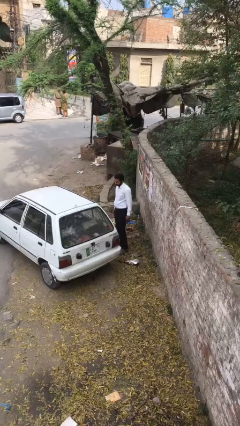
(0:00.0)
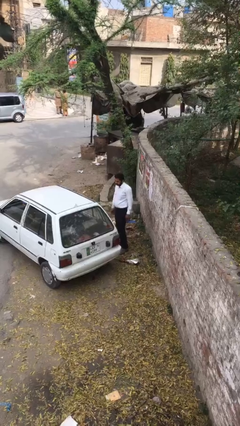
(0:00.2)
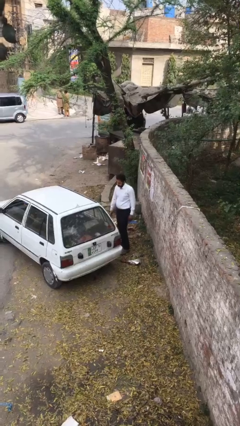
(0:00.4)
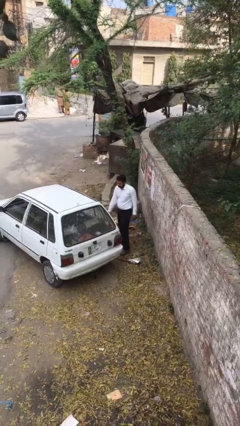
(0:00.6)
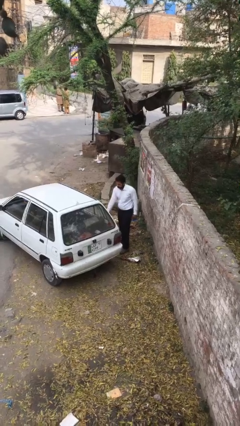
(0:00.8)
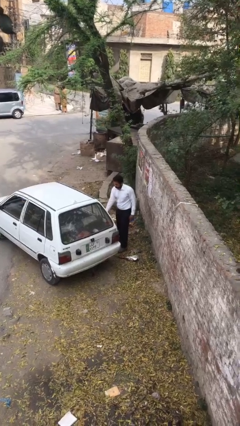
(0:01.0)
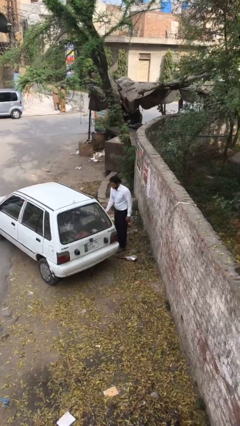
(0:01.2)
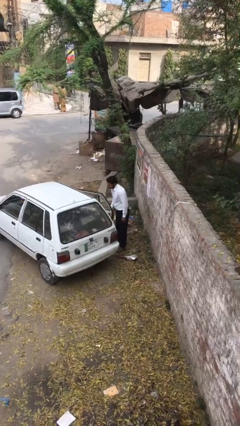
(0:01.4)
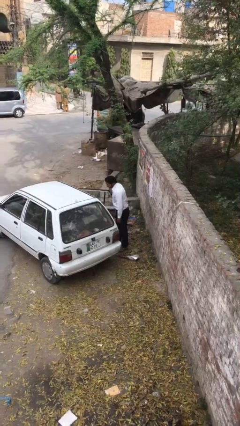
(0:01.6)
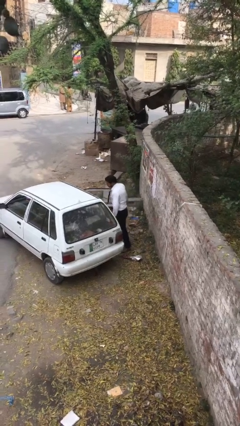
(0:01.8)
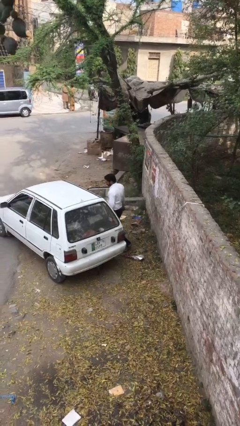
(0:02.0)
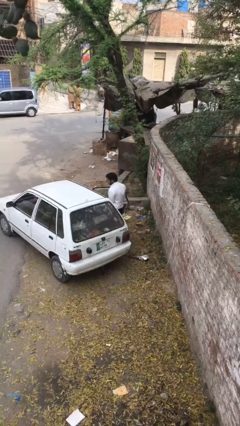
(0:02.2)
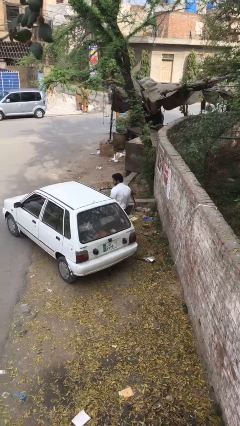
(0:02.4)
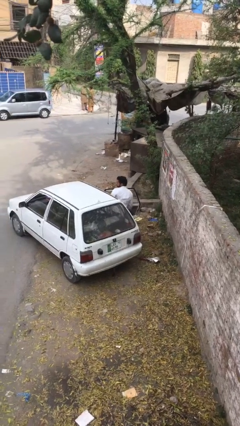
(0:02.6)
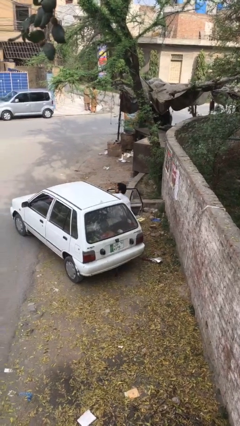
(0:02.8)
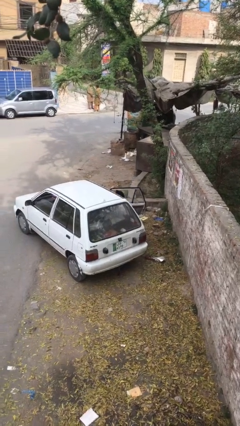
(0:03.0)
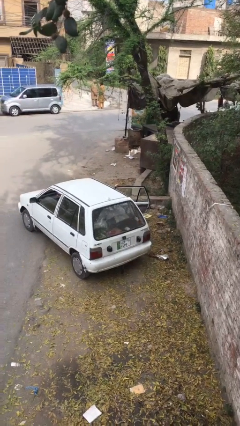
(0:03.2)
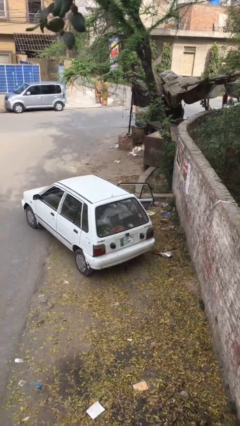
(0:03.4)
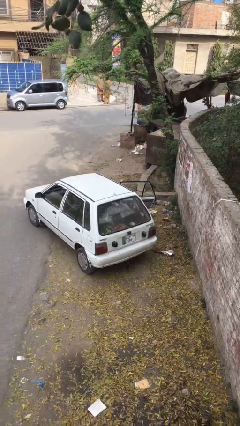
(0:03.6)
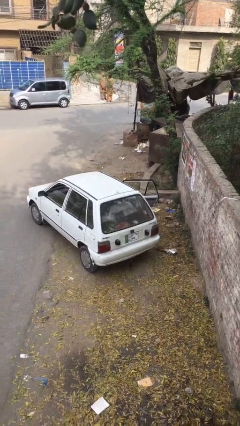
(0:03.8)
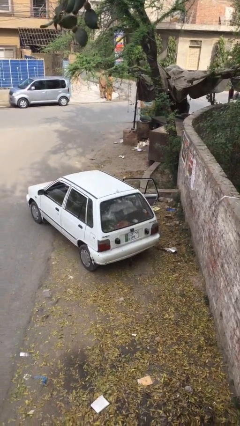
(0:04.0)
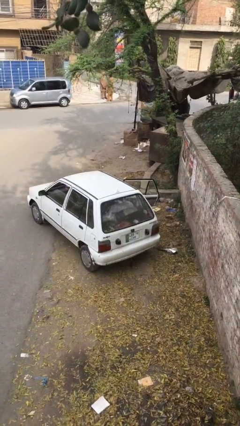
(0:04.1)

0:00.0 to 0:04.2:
person enters car

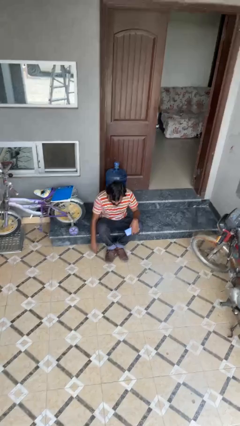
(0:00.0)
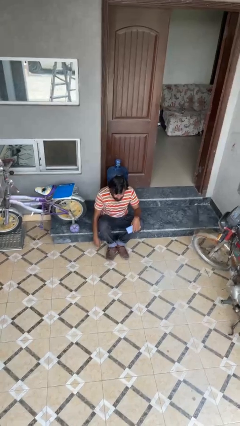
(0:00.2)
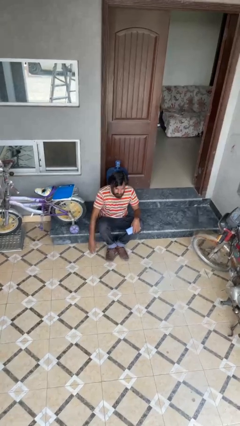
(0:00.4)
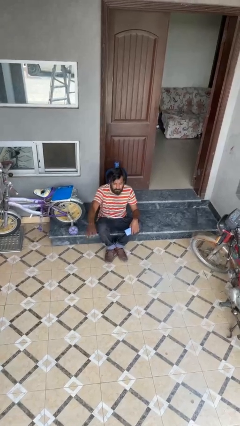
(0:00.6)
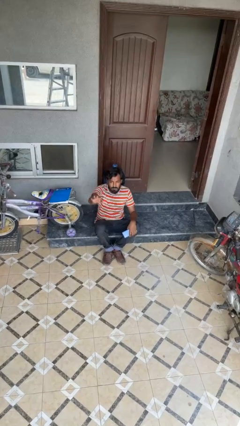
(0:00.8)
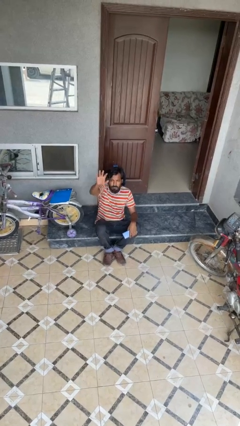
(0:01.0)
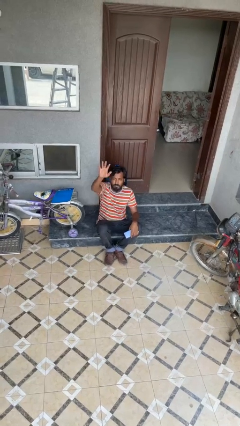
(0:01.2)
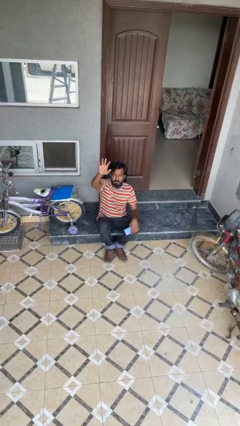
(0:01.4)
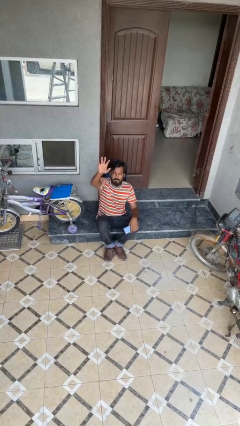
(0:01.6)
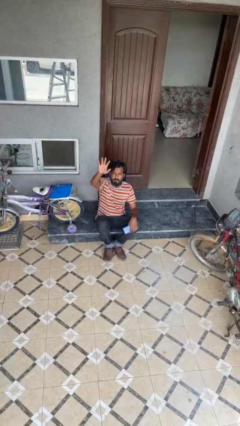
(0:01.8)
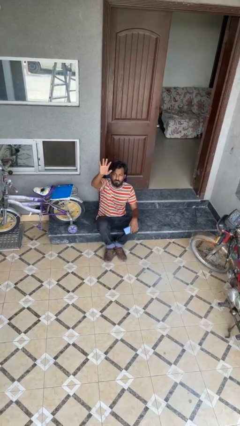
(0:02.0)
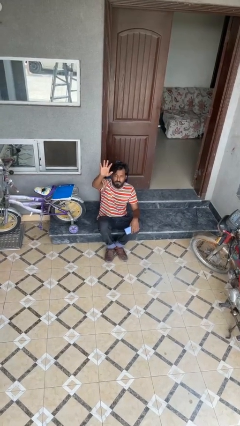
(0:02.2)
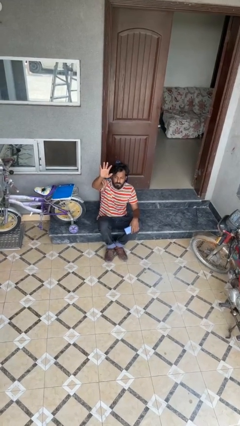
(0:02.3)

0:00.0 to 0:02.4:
person gestures raise hand

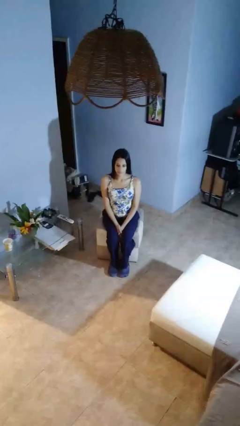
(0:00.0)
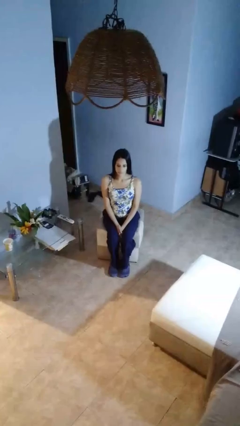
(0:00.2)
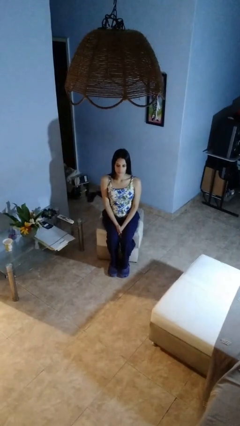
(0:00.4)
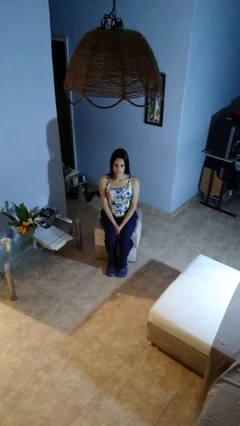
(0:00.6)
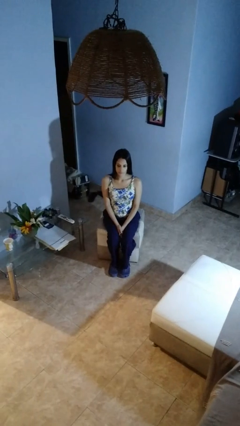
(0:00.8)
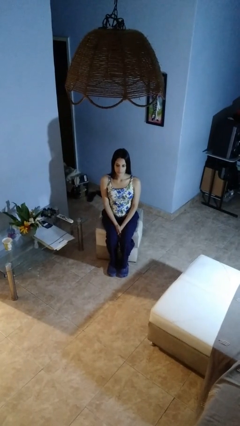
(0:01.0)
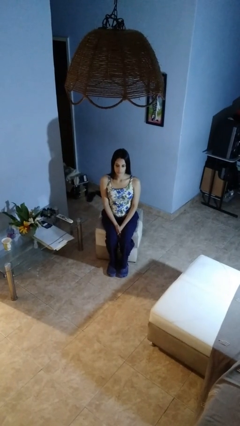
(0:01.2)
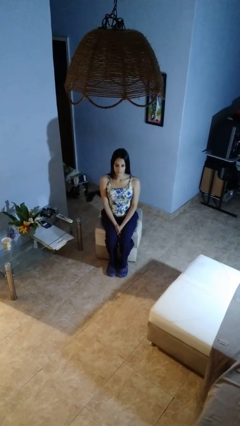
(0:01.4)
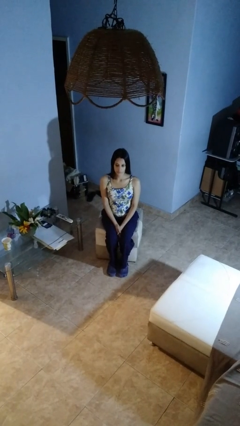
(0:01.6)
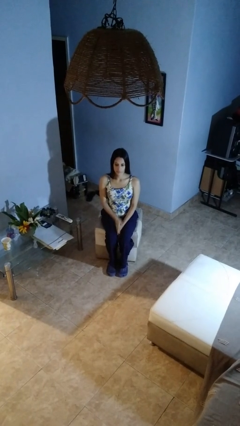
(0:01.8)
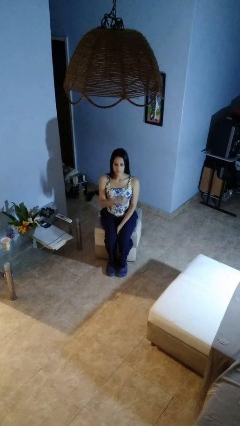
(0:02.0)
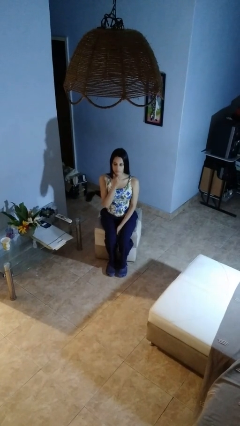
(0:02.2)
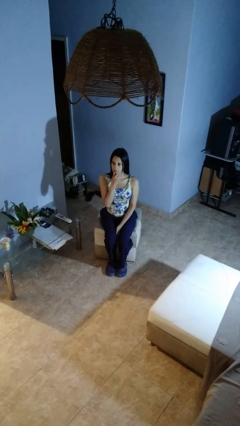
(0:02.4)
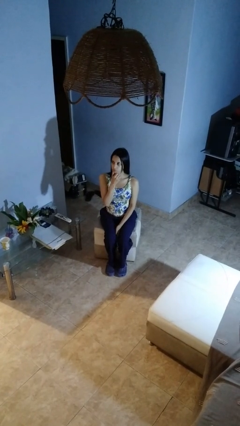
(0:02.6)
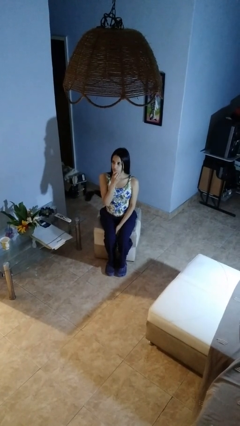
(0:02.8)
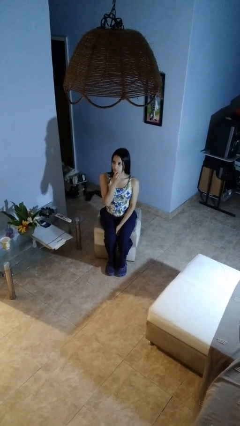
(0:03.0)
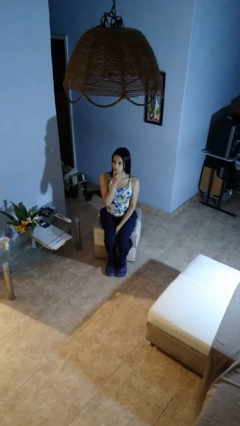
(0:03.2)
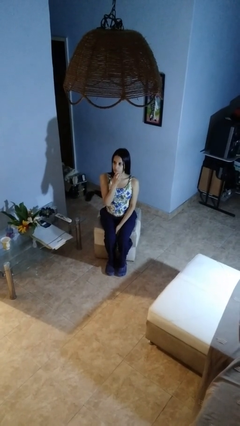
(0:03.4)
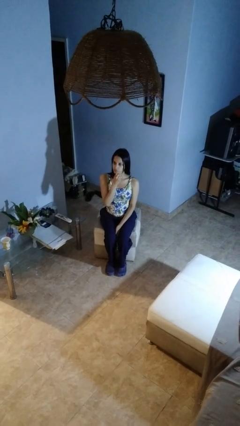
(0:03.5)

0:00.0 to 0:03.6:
person strokes chin

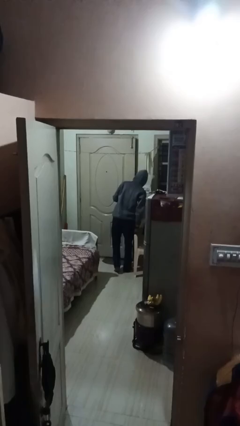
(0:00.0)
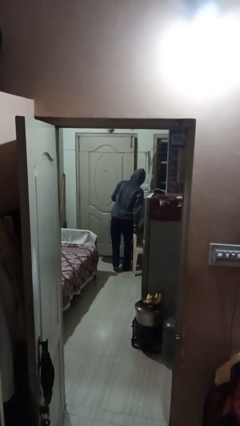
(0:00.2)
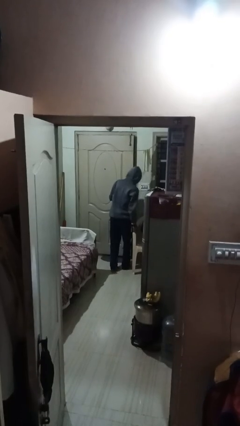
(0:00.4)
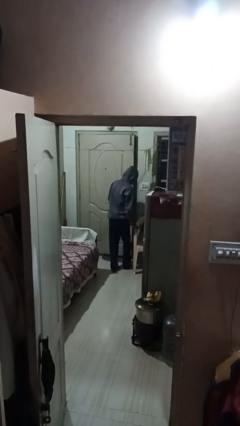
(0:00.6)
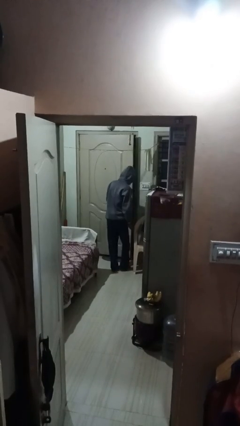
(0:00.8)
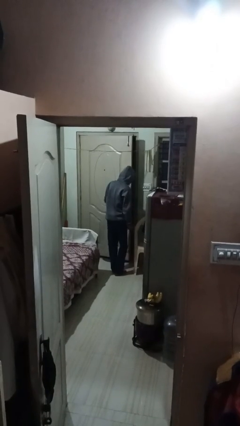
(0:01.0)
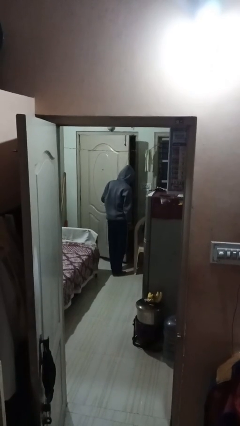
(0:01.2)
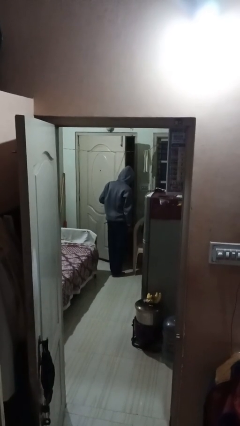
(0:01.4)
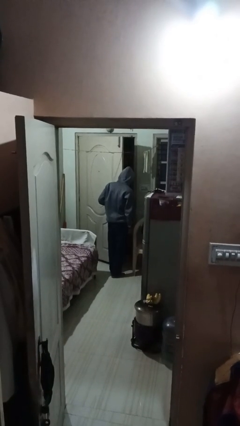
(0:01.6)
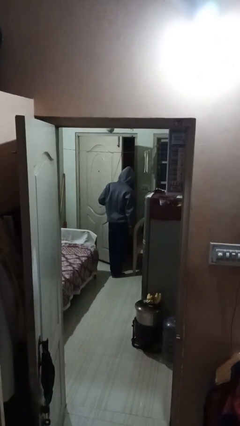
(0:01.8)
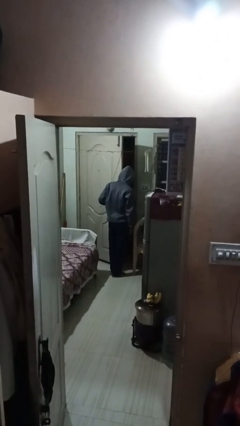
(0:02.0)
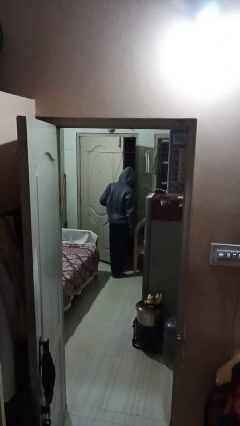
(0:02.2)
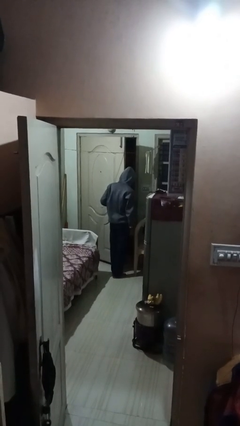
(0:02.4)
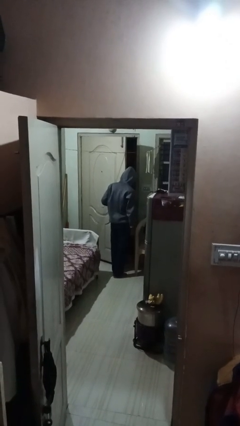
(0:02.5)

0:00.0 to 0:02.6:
person opens facility door

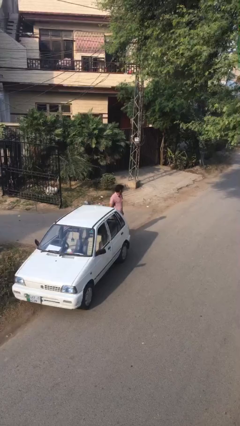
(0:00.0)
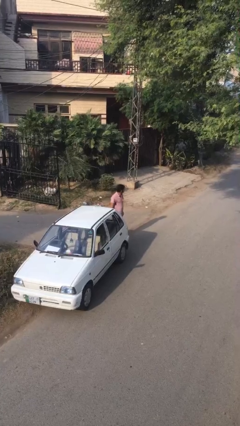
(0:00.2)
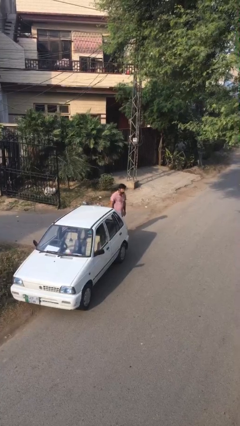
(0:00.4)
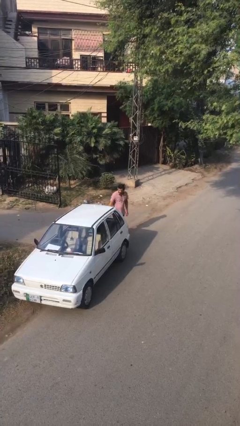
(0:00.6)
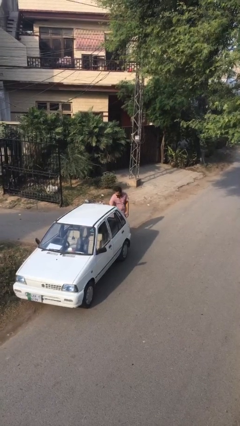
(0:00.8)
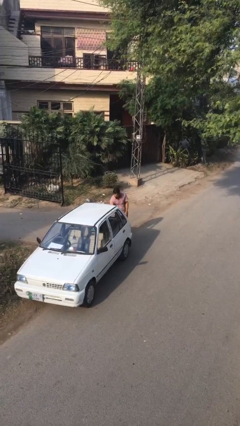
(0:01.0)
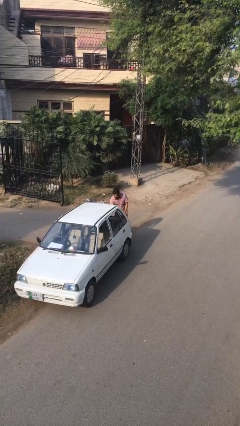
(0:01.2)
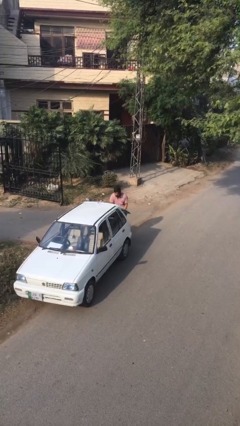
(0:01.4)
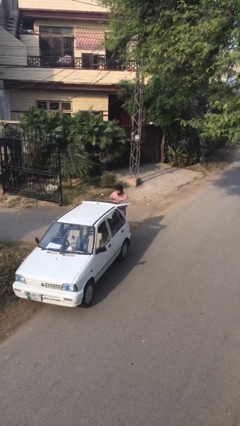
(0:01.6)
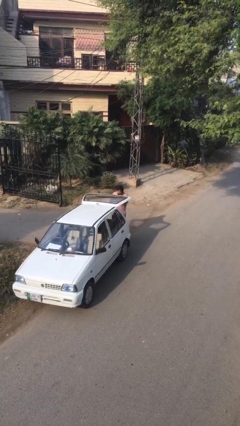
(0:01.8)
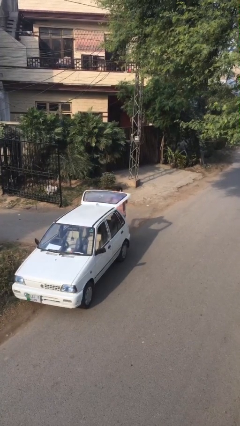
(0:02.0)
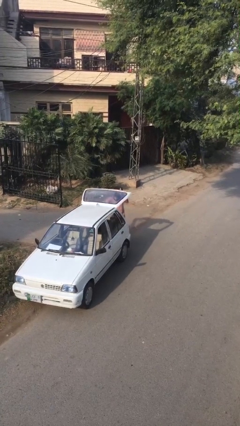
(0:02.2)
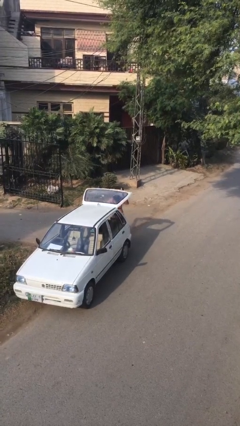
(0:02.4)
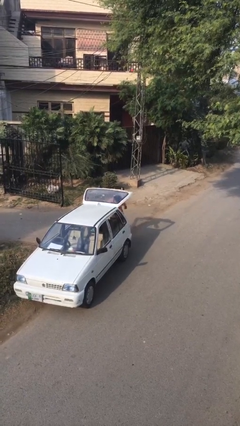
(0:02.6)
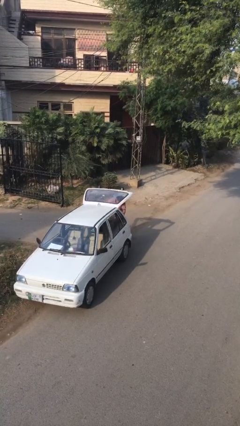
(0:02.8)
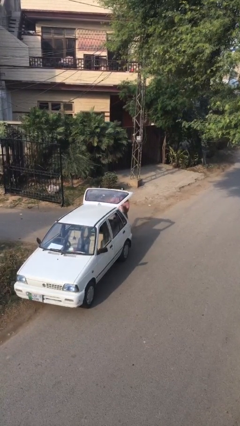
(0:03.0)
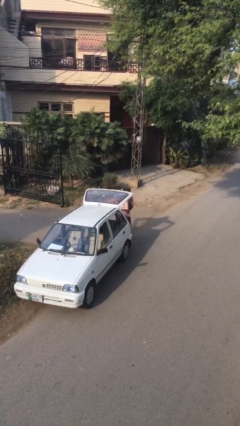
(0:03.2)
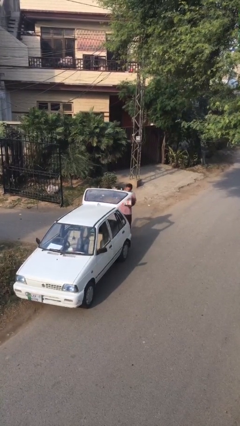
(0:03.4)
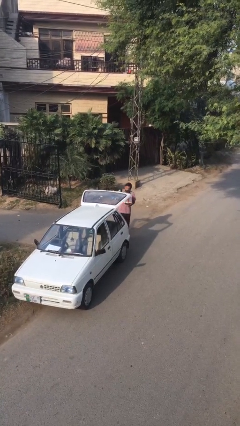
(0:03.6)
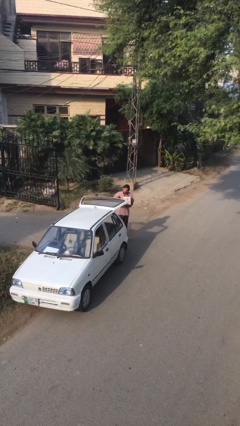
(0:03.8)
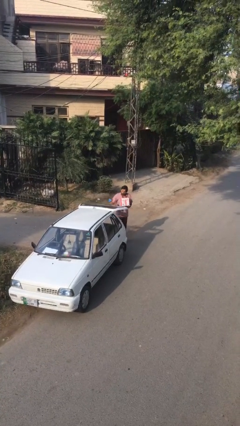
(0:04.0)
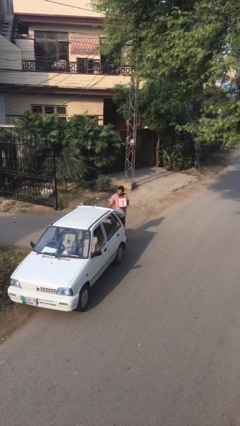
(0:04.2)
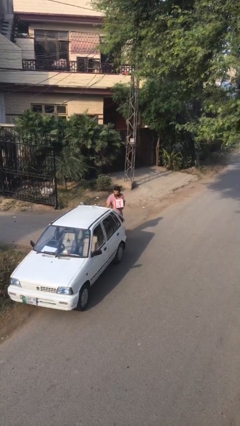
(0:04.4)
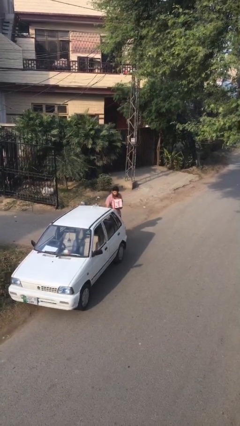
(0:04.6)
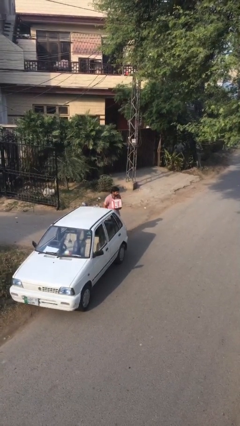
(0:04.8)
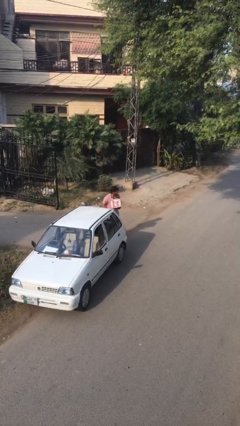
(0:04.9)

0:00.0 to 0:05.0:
person unloads car
